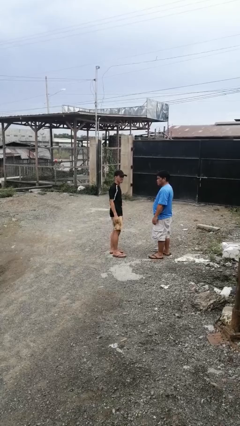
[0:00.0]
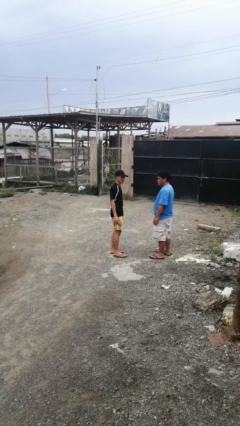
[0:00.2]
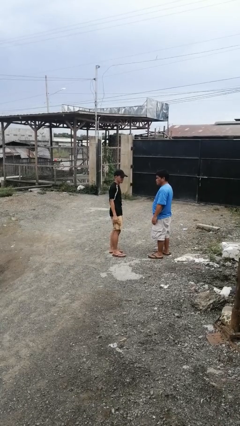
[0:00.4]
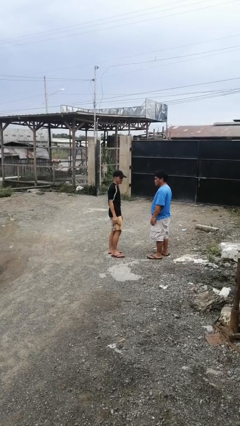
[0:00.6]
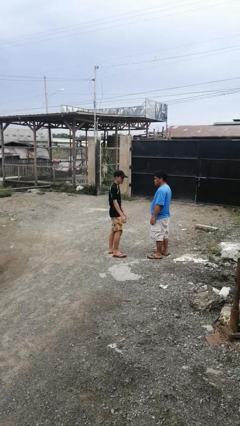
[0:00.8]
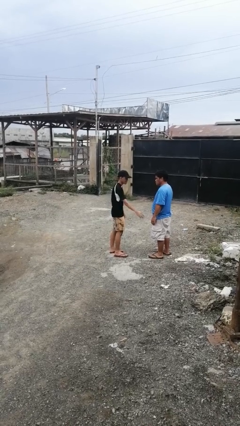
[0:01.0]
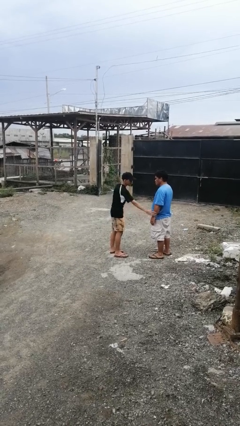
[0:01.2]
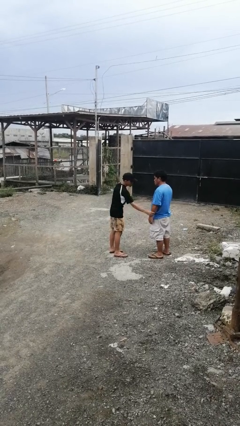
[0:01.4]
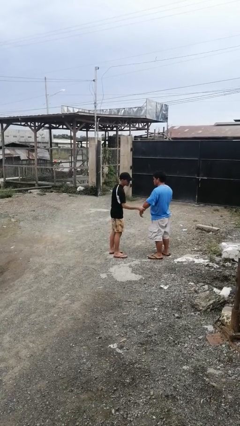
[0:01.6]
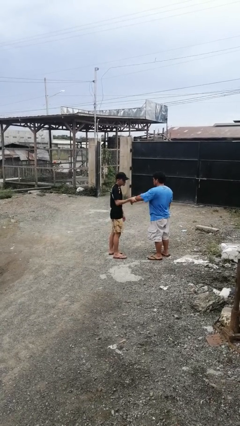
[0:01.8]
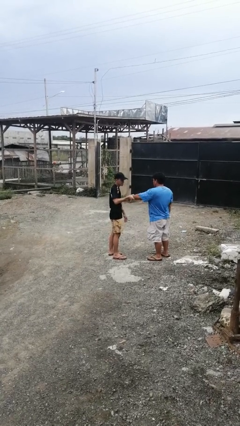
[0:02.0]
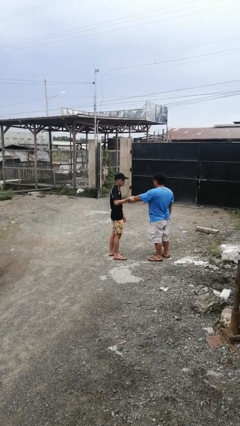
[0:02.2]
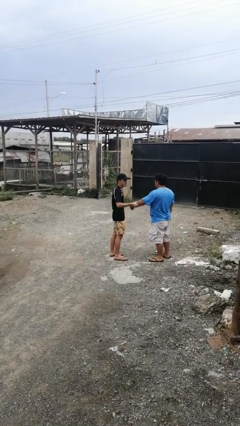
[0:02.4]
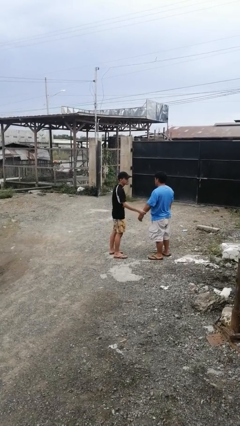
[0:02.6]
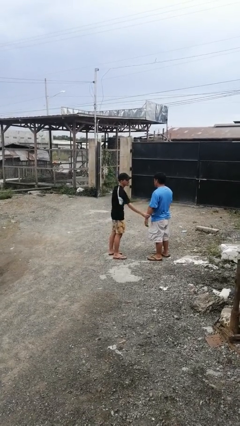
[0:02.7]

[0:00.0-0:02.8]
person grabs person by forearm

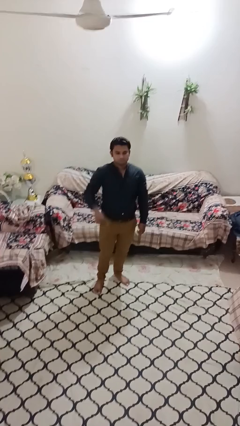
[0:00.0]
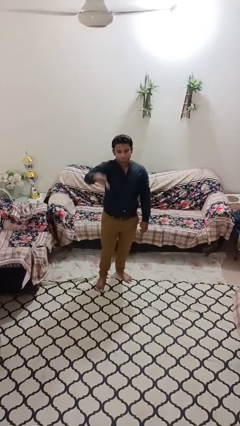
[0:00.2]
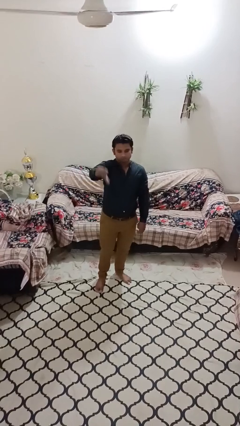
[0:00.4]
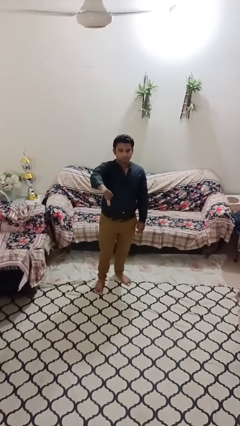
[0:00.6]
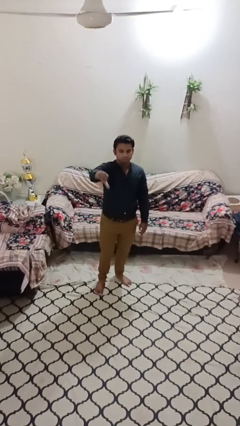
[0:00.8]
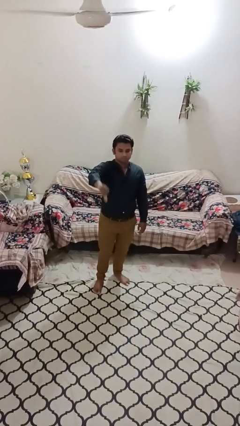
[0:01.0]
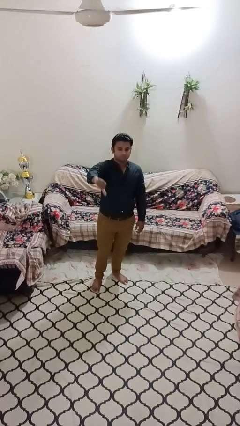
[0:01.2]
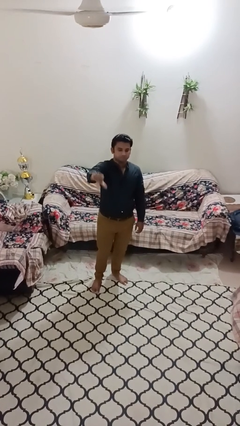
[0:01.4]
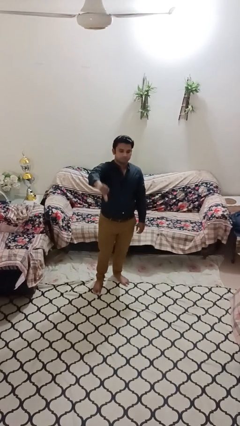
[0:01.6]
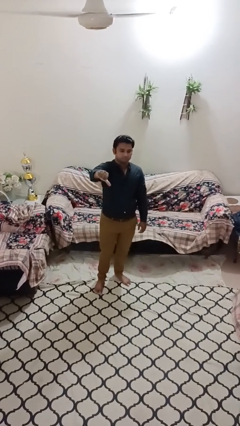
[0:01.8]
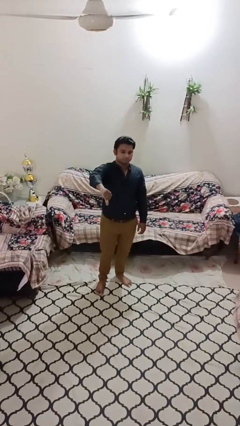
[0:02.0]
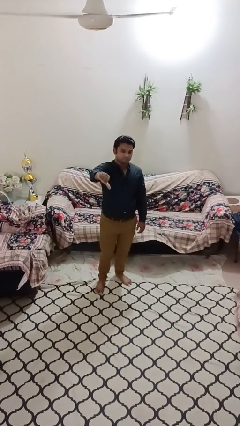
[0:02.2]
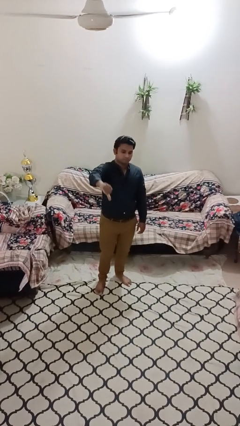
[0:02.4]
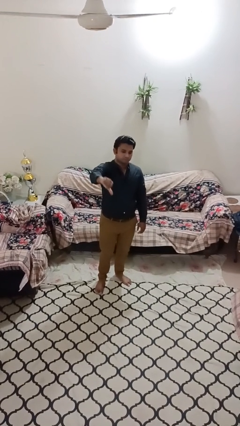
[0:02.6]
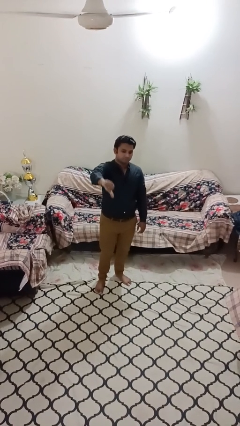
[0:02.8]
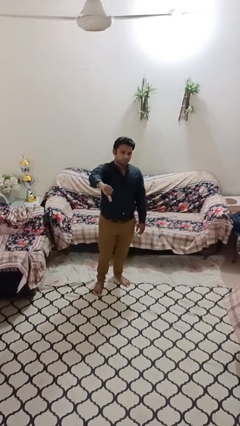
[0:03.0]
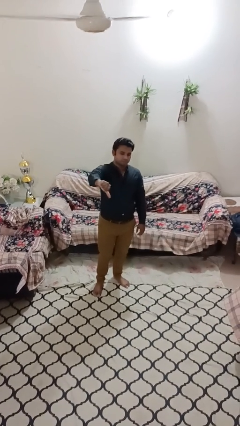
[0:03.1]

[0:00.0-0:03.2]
person gestures thumbs down

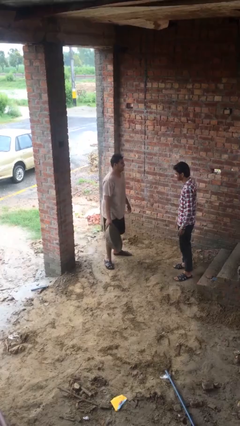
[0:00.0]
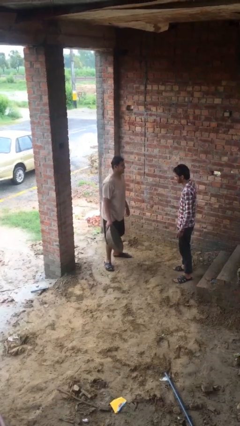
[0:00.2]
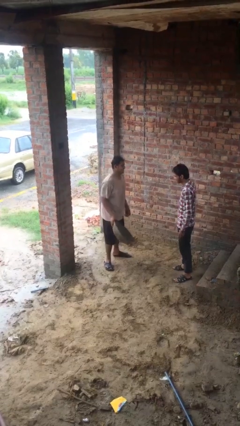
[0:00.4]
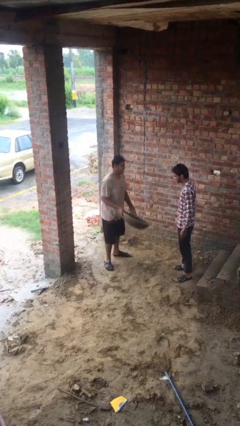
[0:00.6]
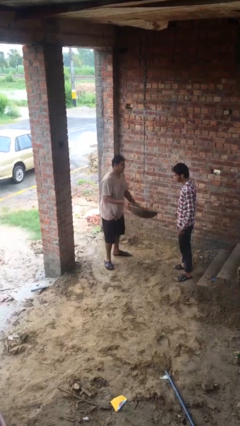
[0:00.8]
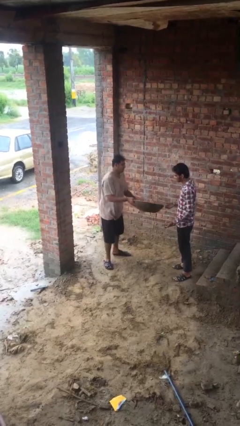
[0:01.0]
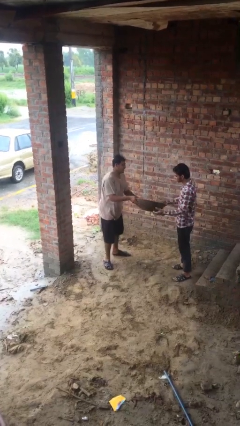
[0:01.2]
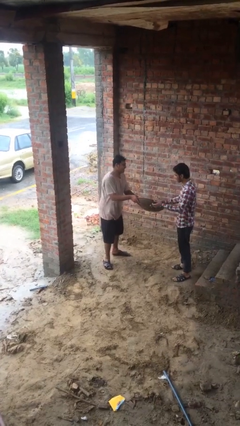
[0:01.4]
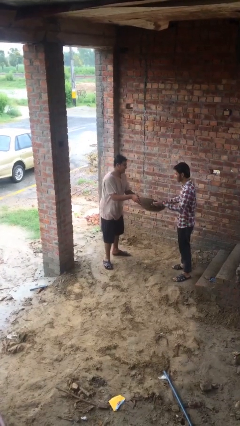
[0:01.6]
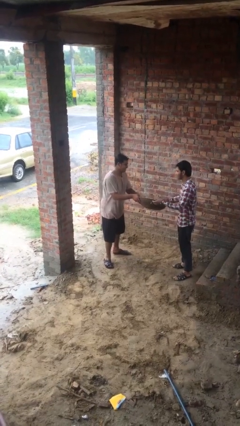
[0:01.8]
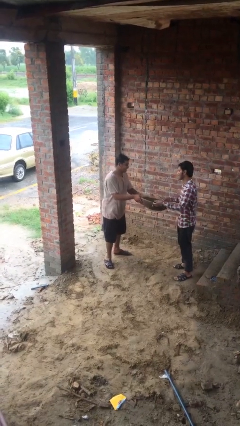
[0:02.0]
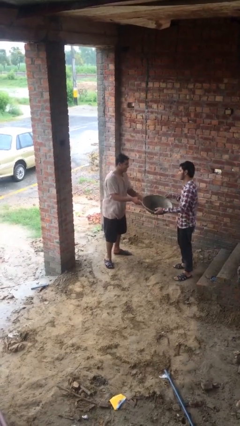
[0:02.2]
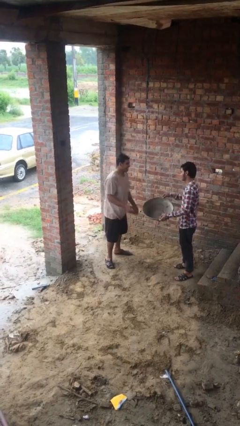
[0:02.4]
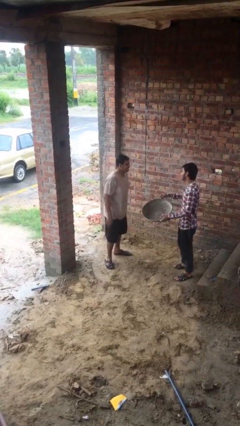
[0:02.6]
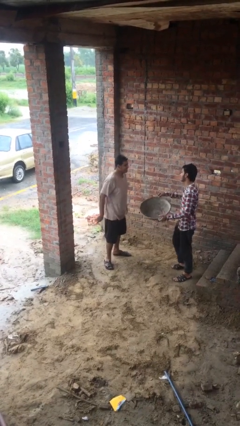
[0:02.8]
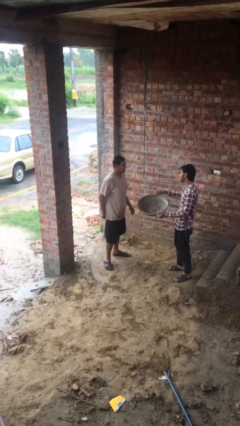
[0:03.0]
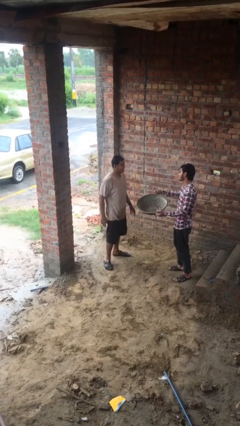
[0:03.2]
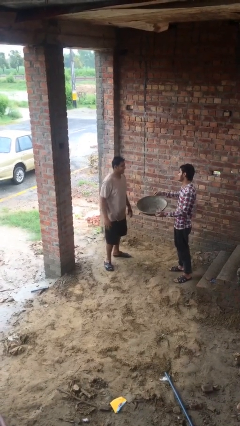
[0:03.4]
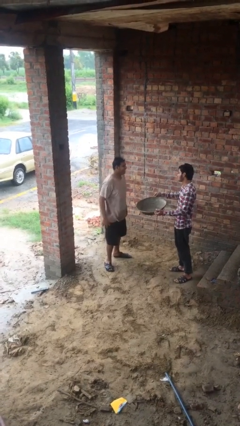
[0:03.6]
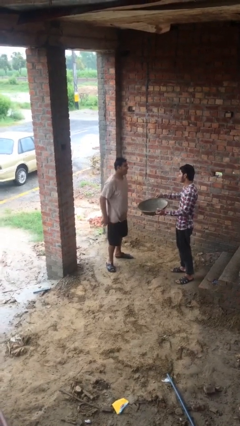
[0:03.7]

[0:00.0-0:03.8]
person transfers object to person

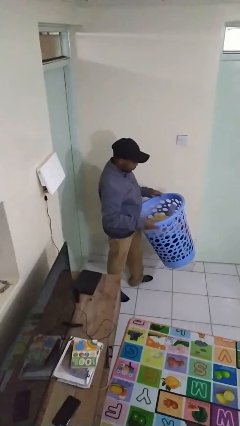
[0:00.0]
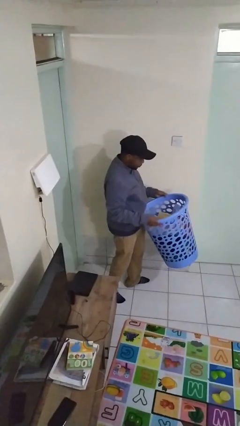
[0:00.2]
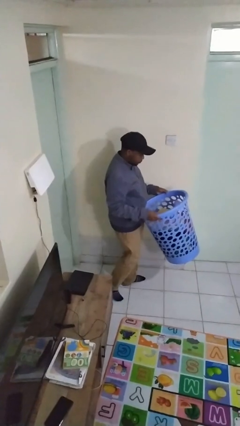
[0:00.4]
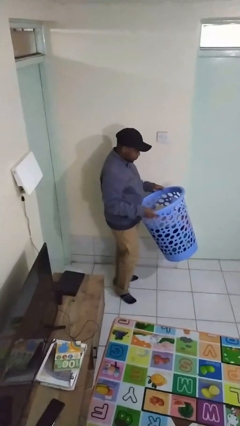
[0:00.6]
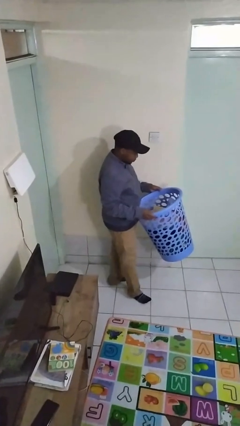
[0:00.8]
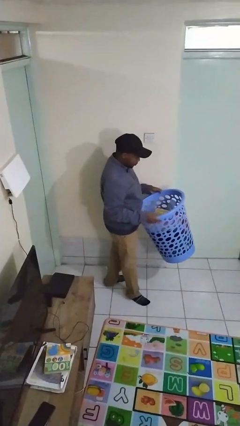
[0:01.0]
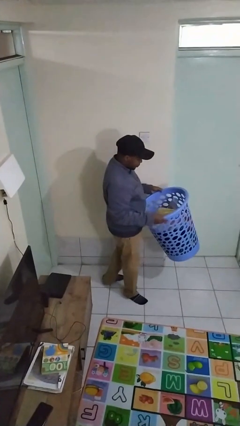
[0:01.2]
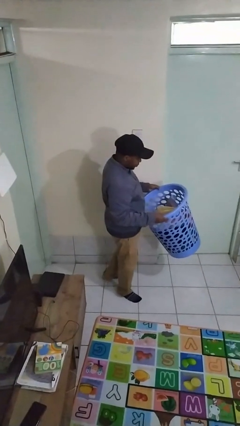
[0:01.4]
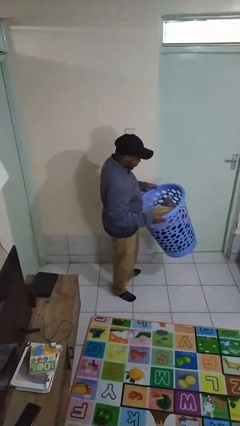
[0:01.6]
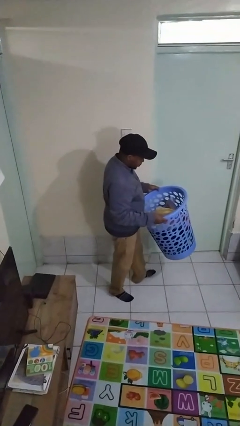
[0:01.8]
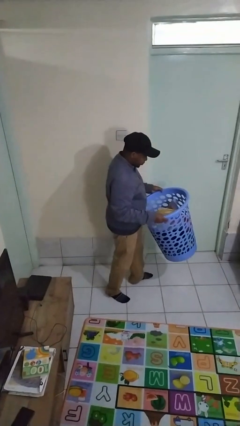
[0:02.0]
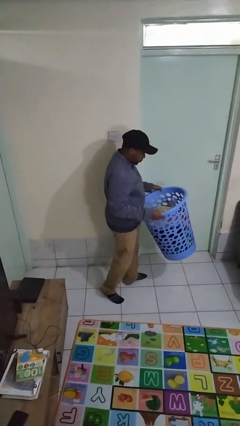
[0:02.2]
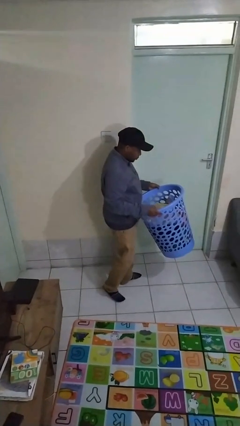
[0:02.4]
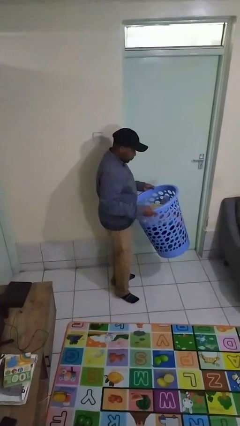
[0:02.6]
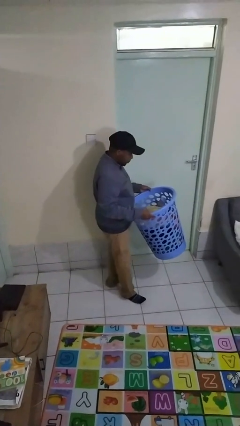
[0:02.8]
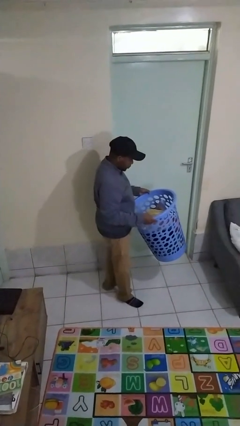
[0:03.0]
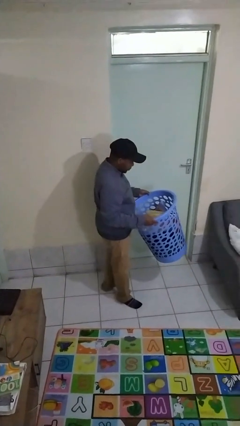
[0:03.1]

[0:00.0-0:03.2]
person carries laundry basket

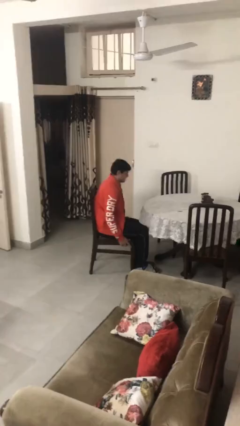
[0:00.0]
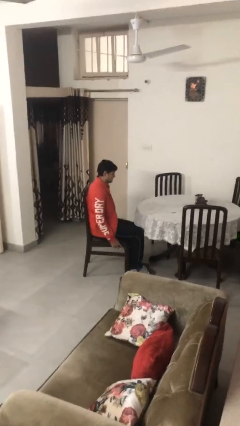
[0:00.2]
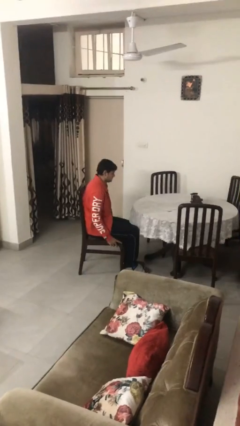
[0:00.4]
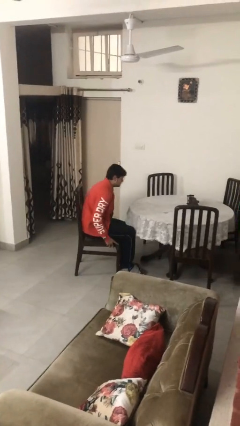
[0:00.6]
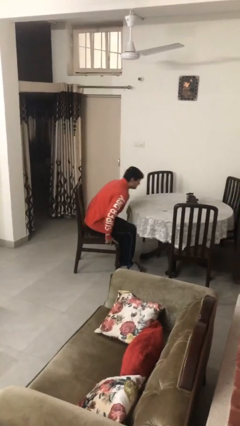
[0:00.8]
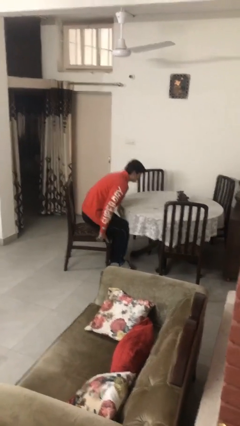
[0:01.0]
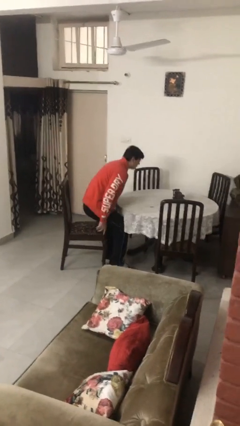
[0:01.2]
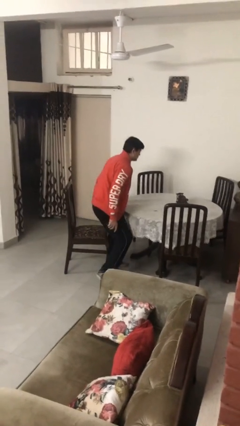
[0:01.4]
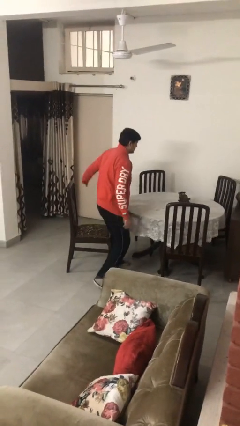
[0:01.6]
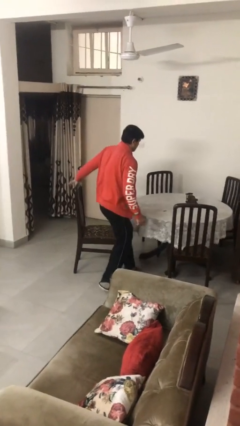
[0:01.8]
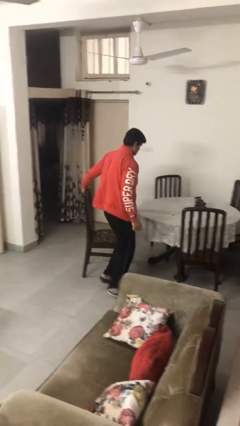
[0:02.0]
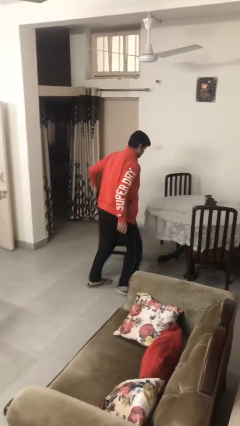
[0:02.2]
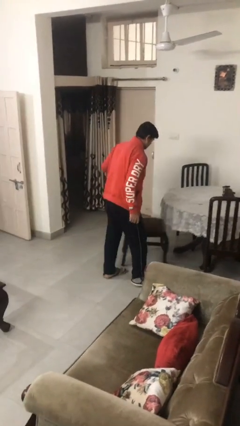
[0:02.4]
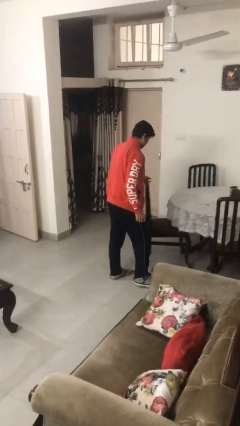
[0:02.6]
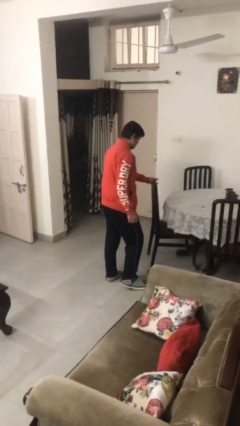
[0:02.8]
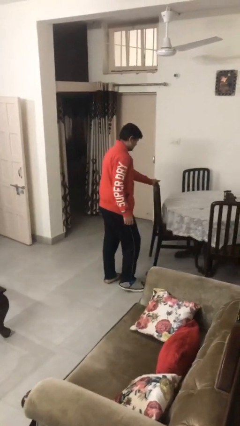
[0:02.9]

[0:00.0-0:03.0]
person stands up

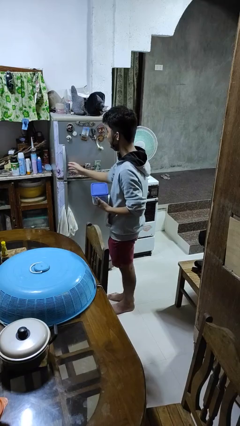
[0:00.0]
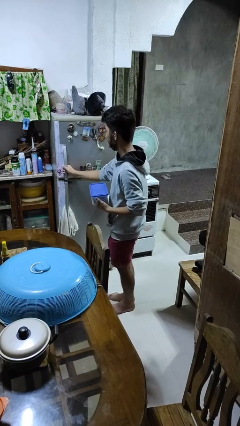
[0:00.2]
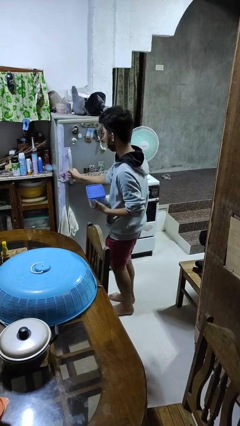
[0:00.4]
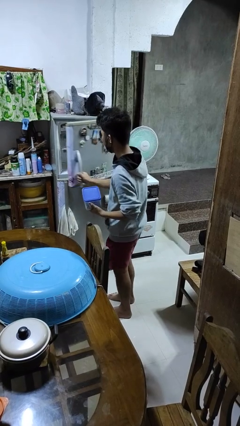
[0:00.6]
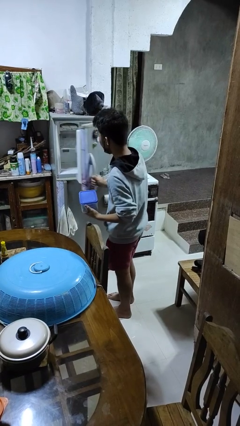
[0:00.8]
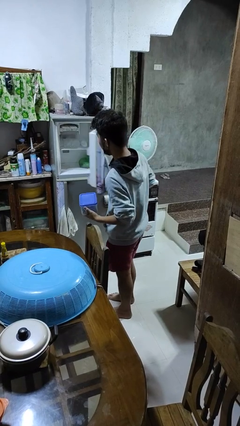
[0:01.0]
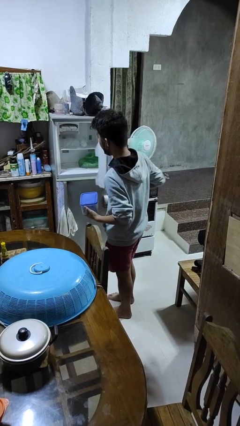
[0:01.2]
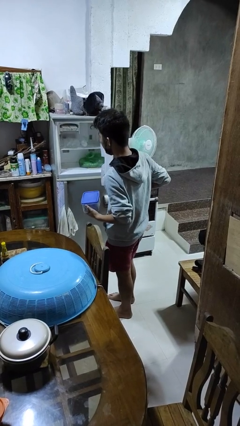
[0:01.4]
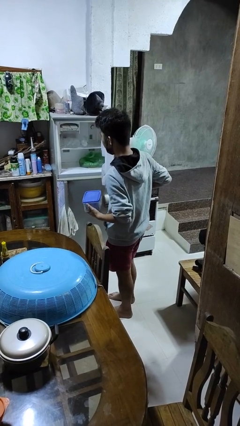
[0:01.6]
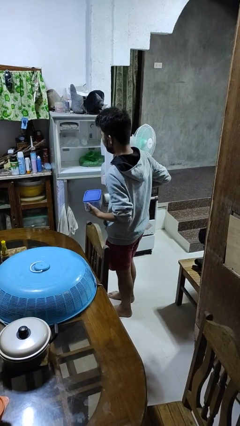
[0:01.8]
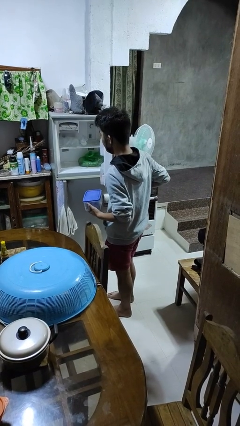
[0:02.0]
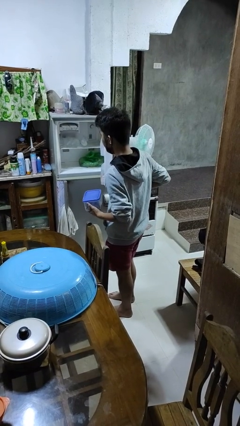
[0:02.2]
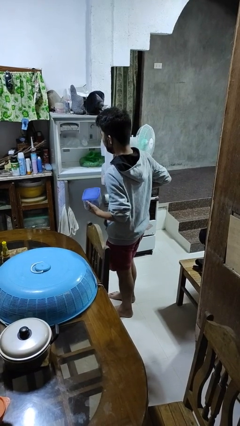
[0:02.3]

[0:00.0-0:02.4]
person opens refrigerator
